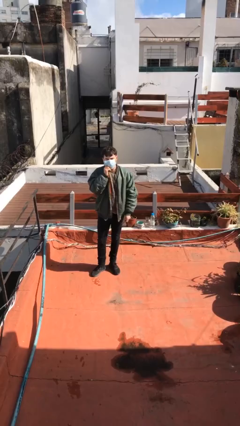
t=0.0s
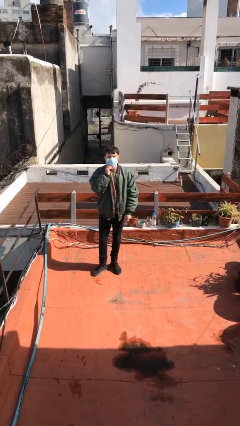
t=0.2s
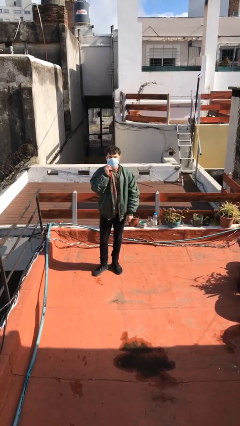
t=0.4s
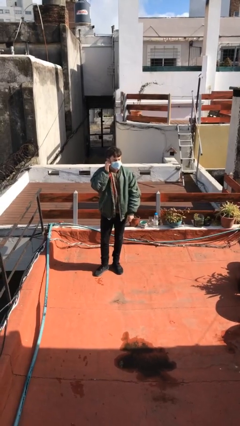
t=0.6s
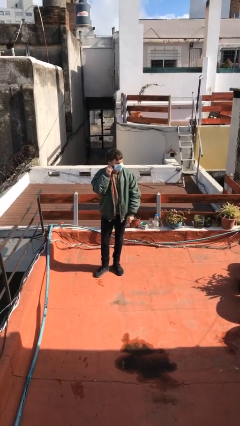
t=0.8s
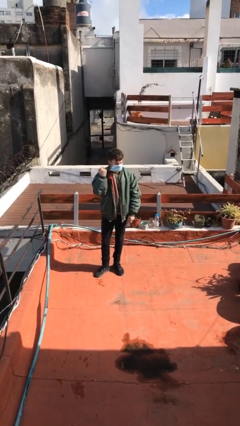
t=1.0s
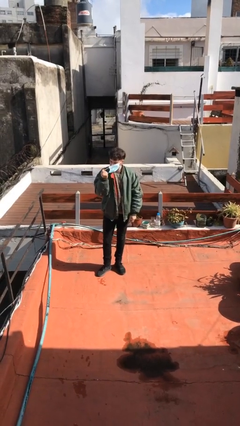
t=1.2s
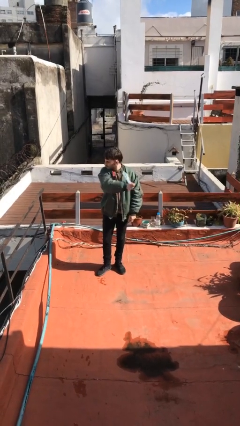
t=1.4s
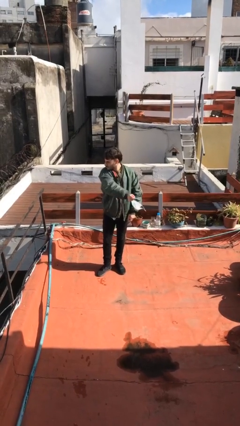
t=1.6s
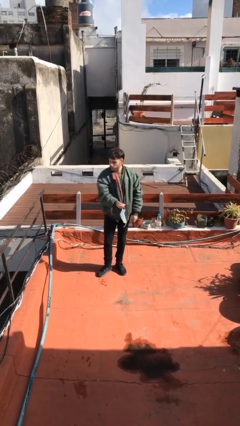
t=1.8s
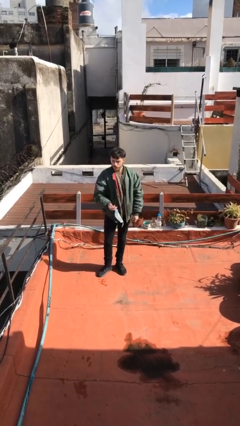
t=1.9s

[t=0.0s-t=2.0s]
person takes off facemask

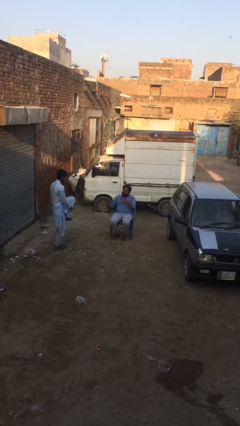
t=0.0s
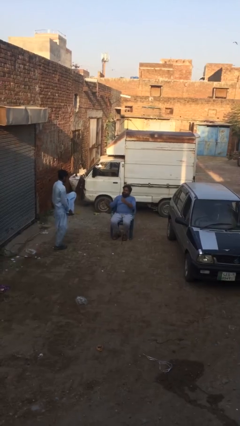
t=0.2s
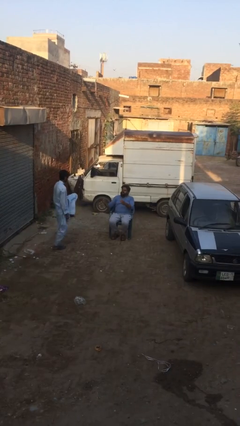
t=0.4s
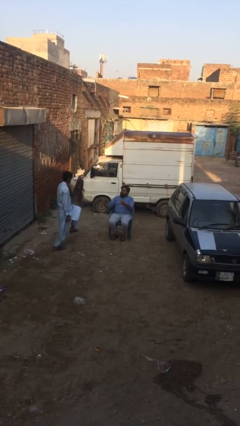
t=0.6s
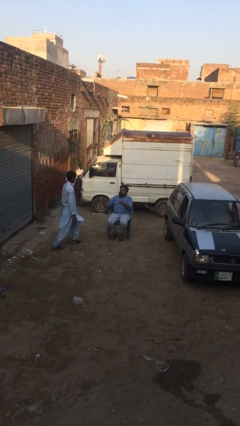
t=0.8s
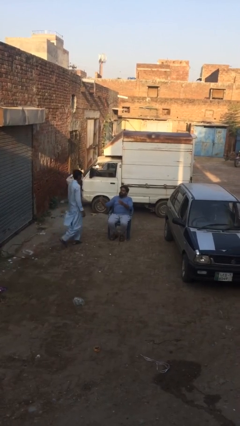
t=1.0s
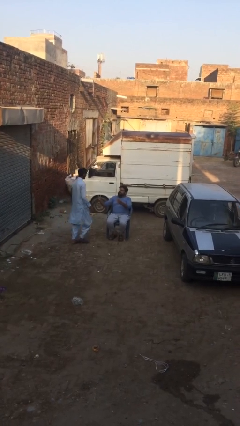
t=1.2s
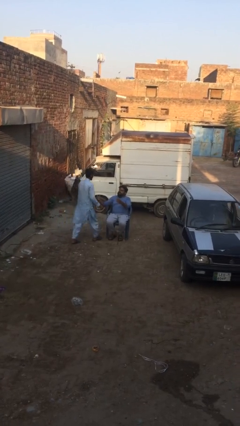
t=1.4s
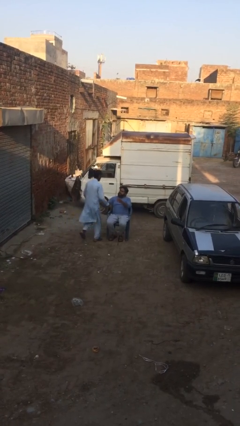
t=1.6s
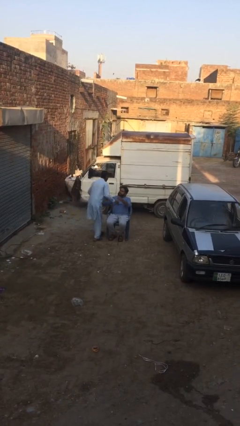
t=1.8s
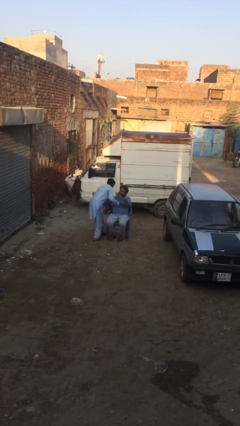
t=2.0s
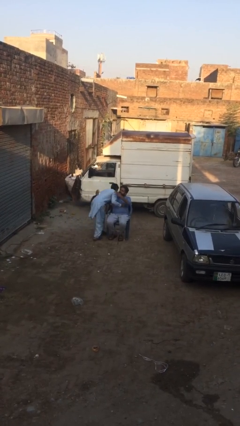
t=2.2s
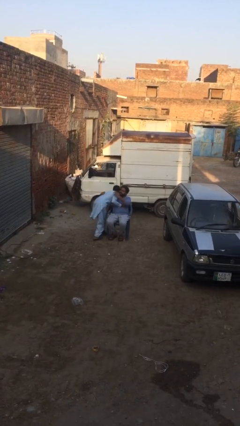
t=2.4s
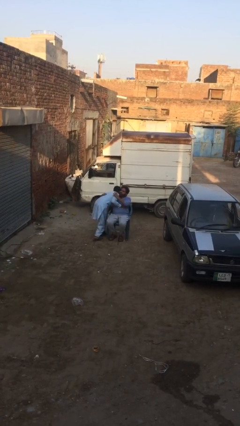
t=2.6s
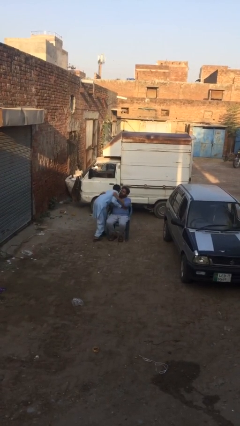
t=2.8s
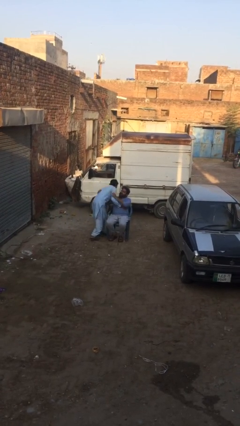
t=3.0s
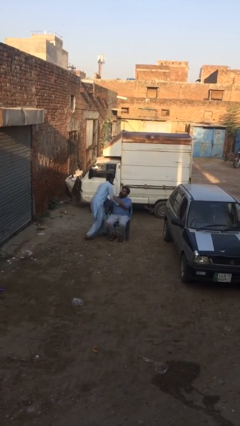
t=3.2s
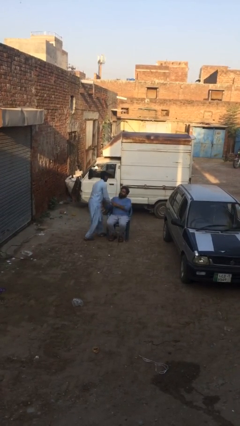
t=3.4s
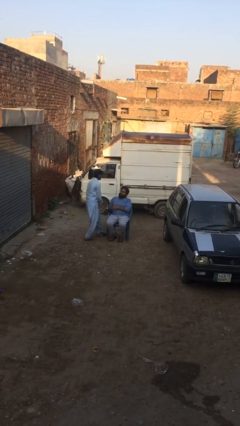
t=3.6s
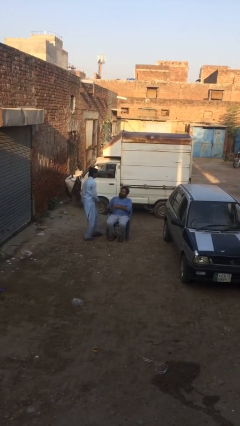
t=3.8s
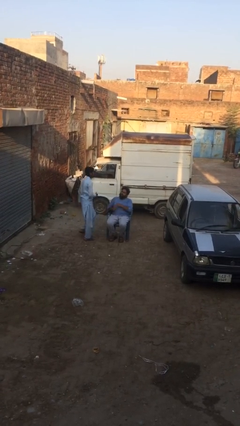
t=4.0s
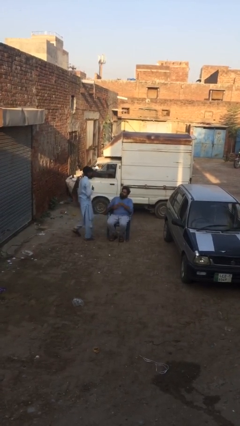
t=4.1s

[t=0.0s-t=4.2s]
person embraces person

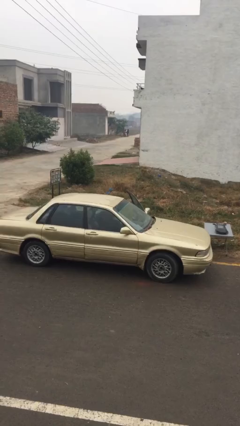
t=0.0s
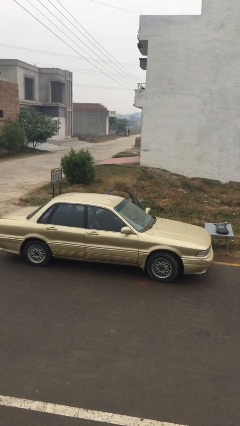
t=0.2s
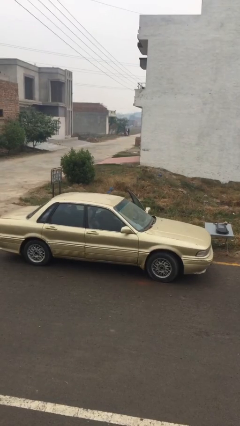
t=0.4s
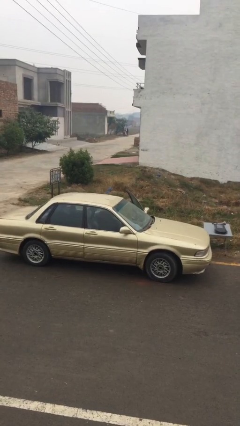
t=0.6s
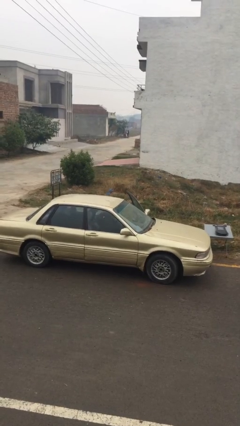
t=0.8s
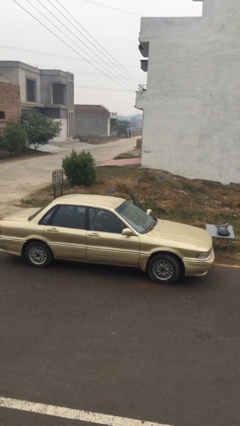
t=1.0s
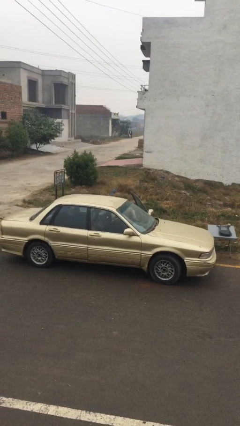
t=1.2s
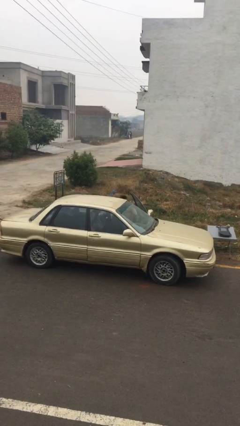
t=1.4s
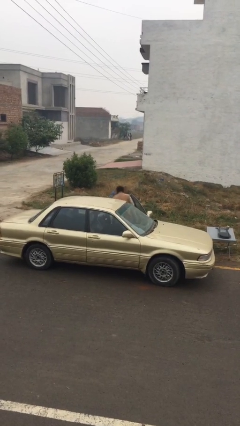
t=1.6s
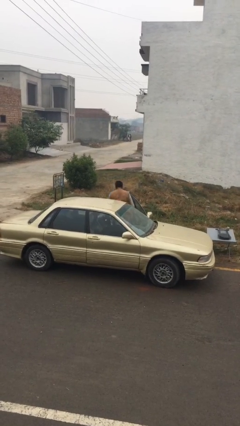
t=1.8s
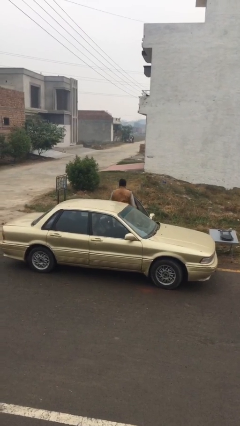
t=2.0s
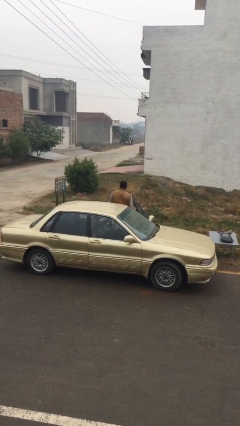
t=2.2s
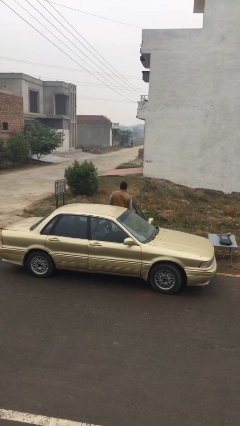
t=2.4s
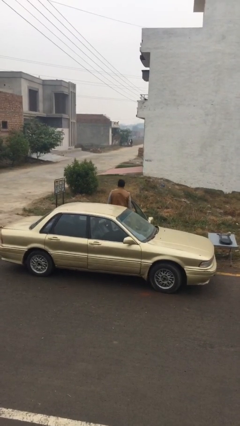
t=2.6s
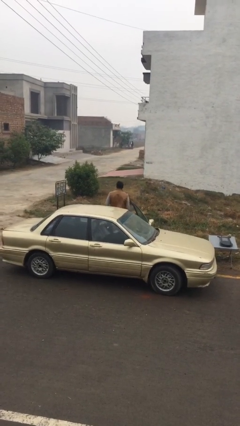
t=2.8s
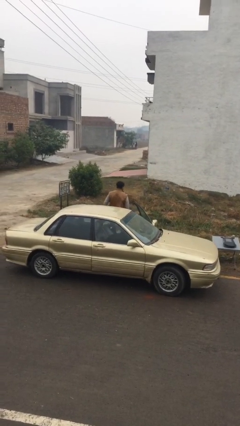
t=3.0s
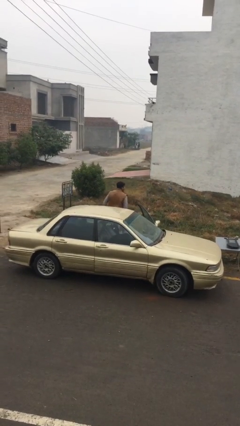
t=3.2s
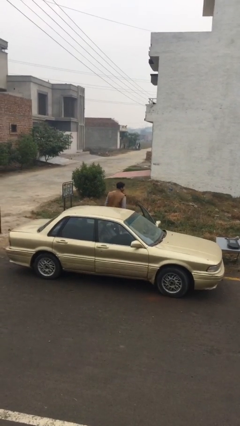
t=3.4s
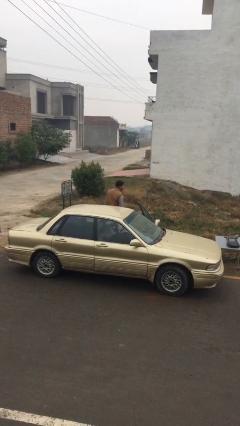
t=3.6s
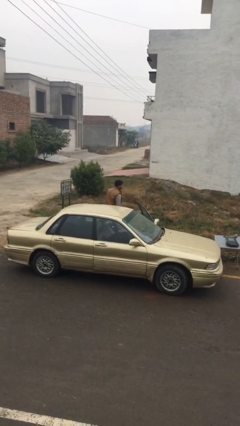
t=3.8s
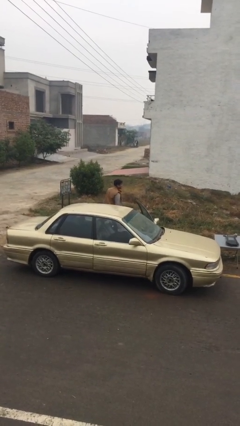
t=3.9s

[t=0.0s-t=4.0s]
person exits car

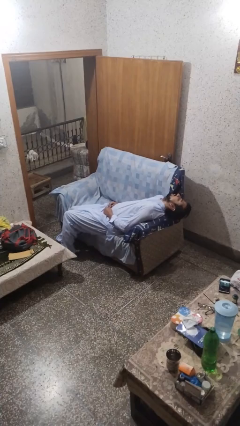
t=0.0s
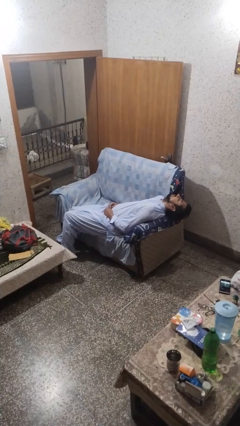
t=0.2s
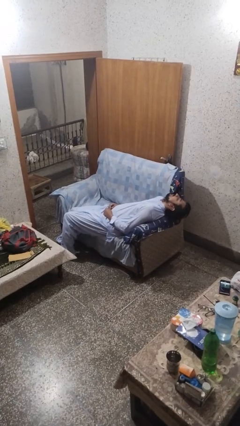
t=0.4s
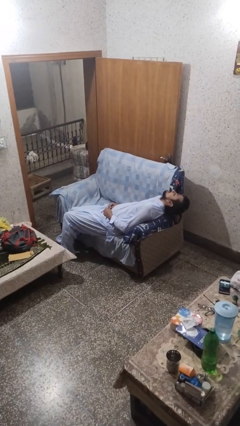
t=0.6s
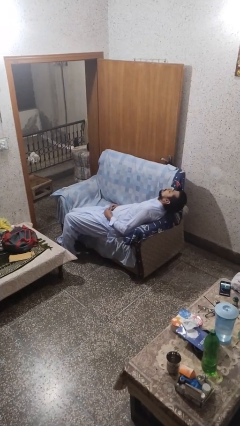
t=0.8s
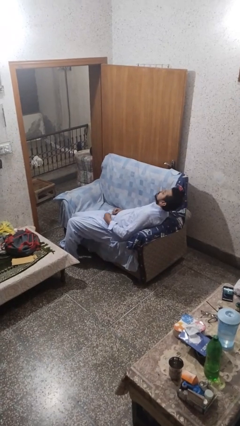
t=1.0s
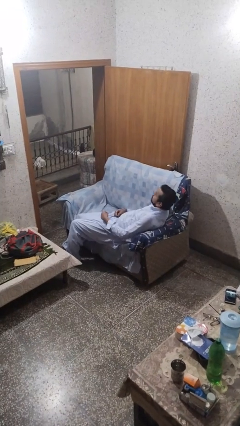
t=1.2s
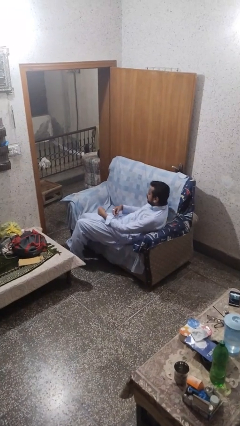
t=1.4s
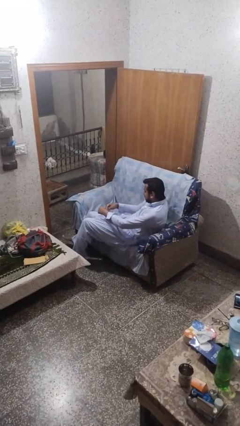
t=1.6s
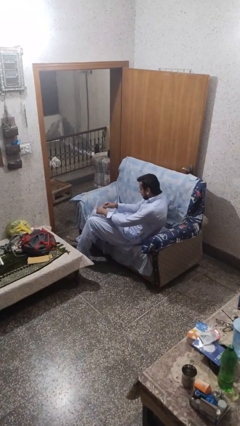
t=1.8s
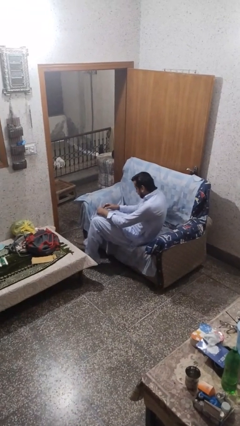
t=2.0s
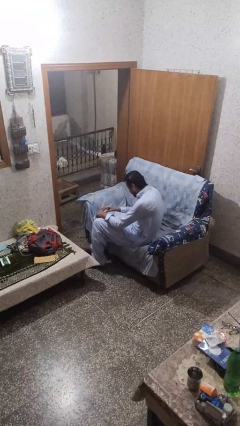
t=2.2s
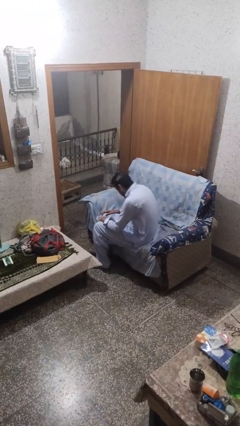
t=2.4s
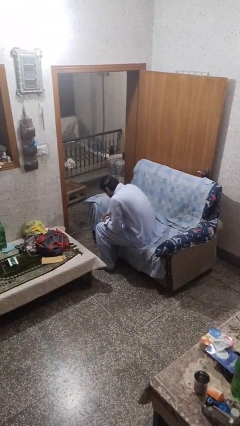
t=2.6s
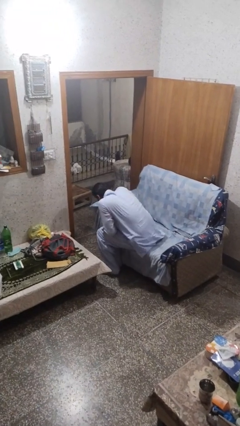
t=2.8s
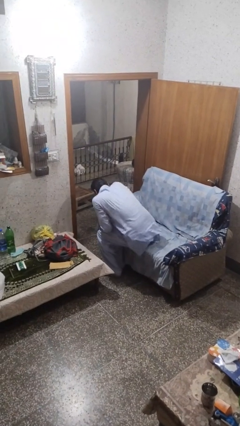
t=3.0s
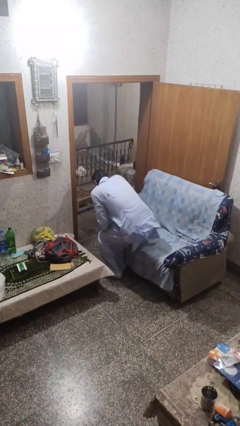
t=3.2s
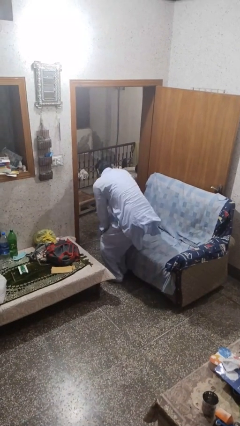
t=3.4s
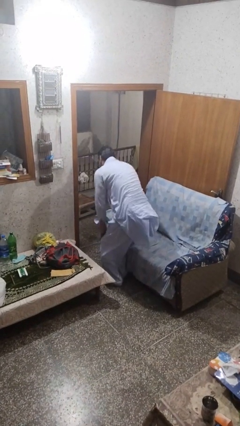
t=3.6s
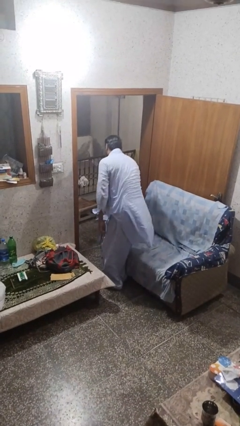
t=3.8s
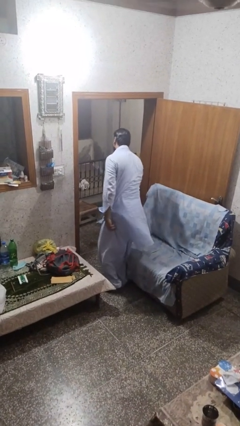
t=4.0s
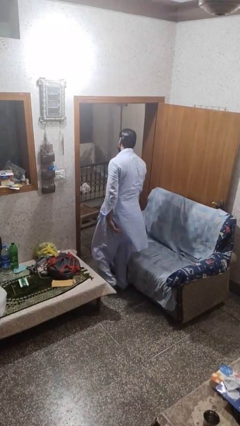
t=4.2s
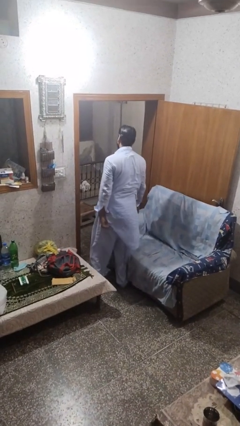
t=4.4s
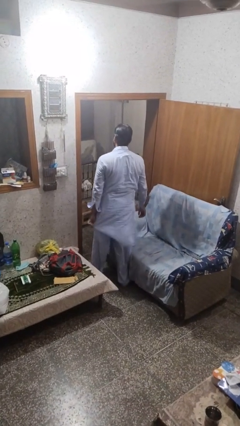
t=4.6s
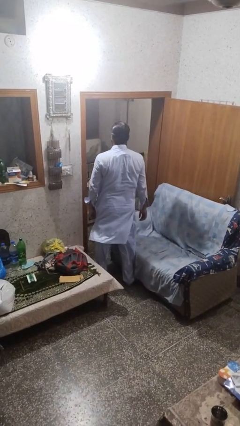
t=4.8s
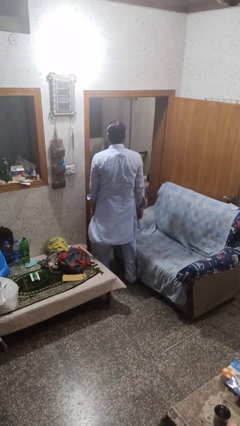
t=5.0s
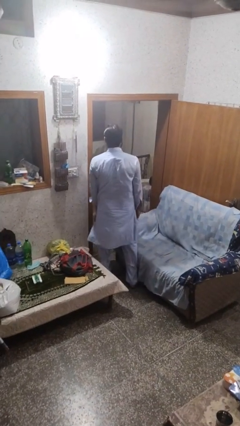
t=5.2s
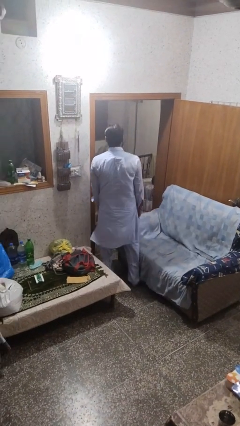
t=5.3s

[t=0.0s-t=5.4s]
person stands up

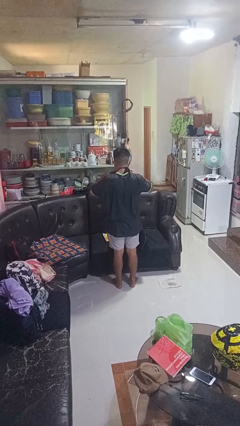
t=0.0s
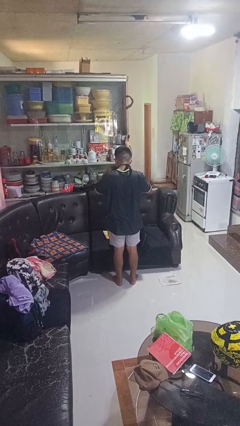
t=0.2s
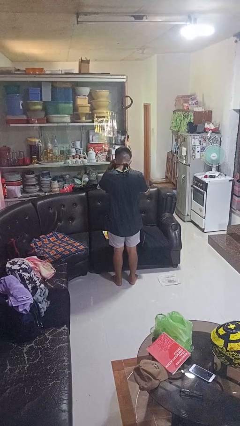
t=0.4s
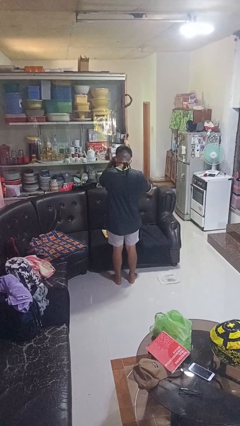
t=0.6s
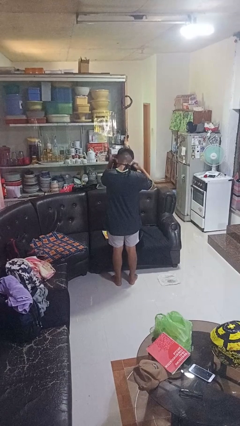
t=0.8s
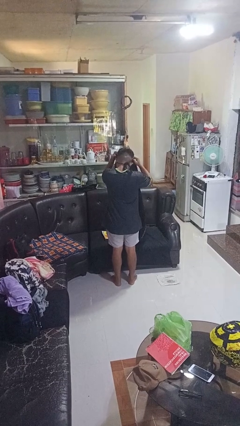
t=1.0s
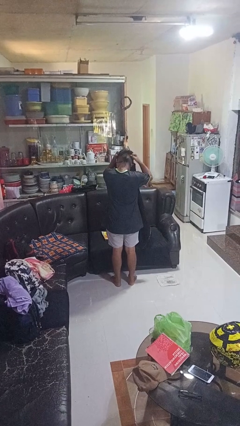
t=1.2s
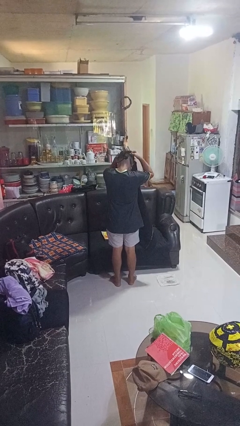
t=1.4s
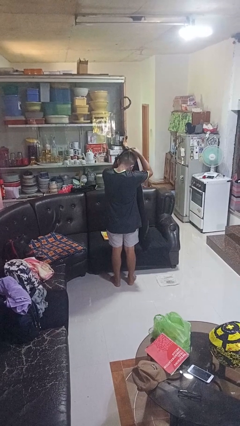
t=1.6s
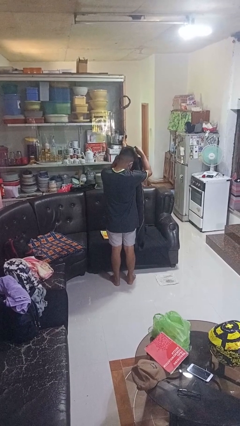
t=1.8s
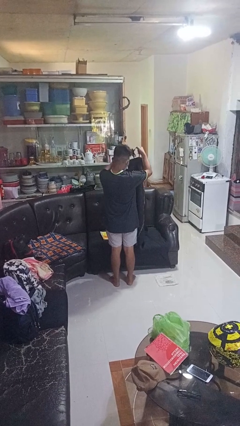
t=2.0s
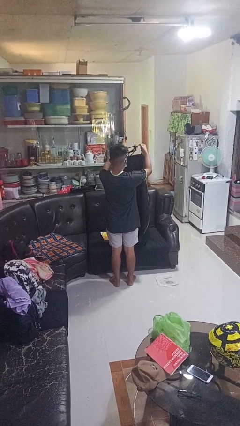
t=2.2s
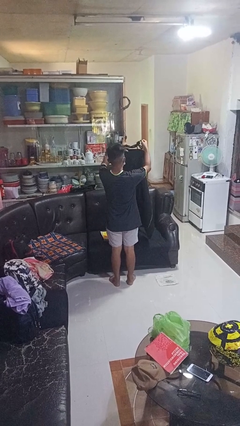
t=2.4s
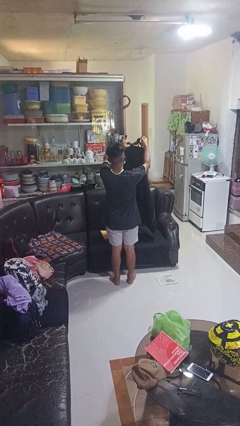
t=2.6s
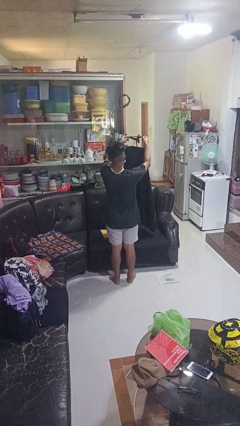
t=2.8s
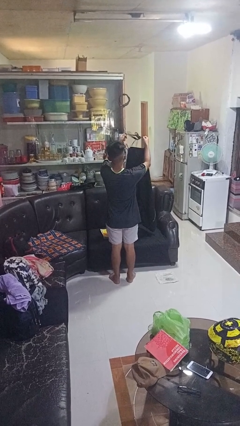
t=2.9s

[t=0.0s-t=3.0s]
person takes off apron
